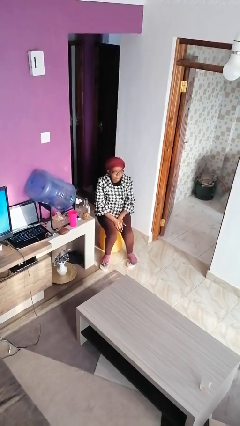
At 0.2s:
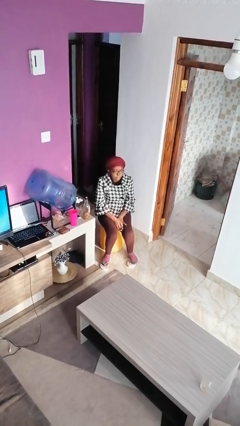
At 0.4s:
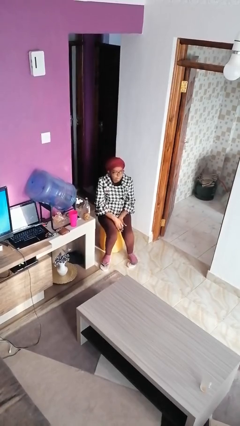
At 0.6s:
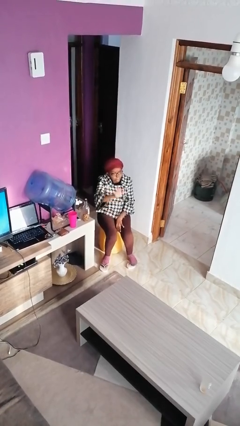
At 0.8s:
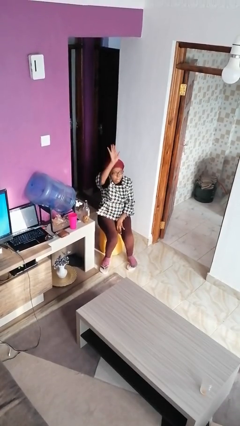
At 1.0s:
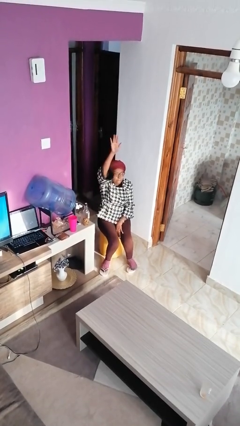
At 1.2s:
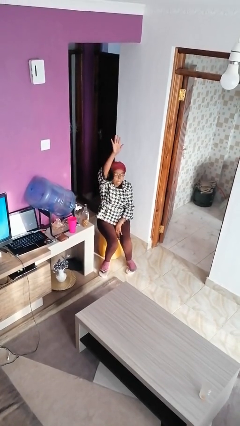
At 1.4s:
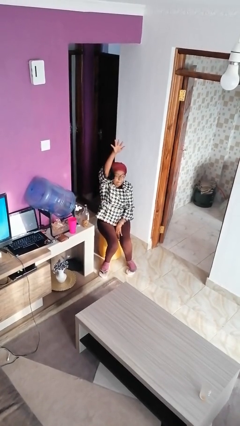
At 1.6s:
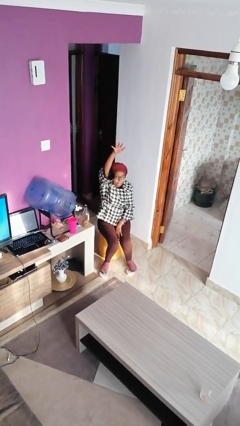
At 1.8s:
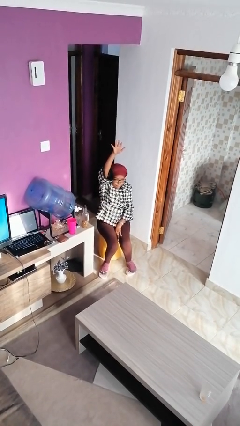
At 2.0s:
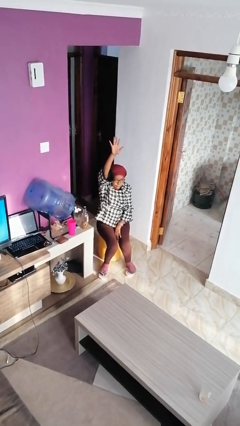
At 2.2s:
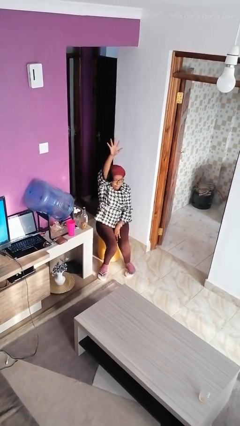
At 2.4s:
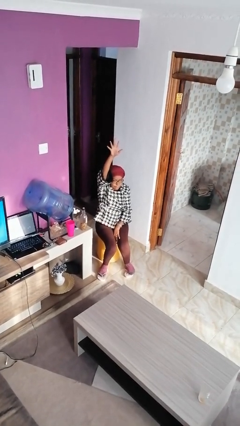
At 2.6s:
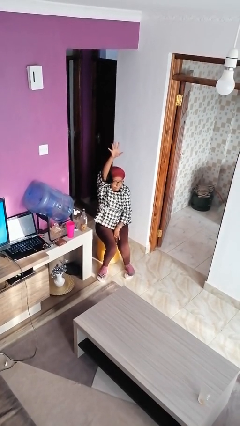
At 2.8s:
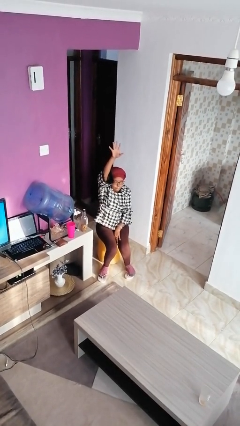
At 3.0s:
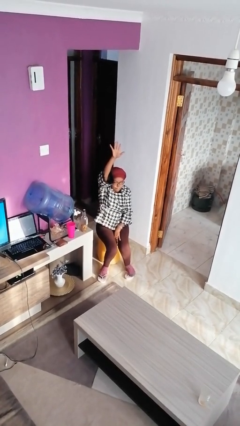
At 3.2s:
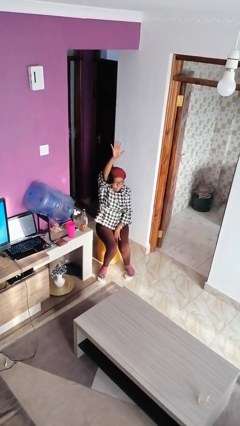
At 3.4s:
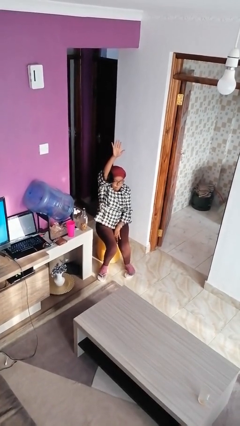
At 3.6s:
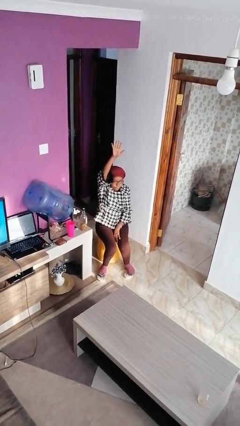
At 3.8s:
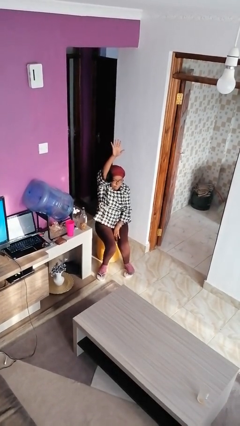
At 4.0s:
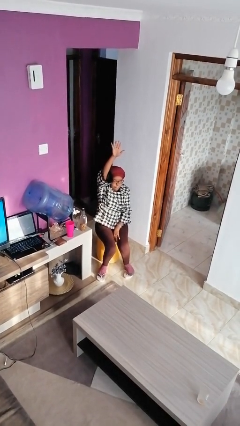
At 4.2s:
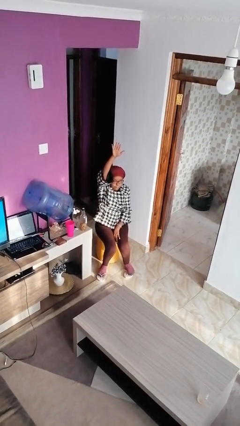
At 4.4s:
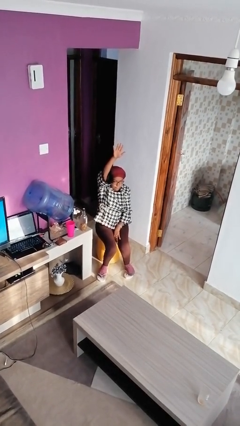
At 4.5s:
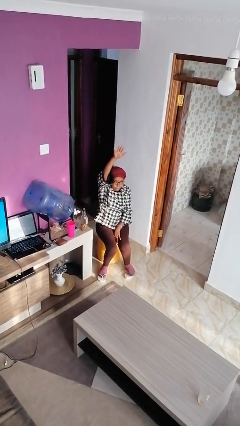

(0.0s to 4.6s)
person gestures raise hand

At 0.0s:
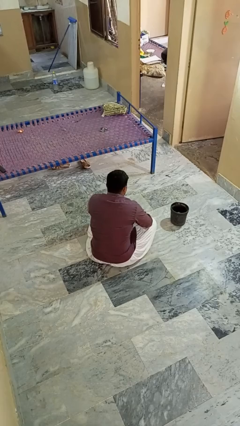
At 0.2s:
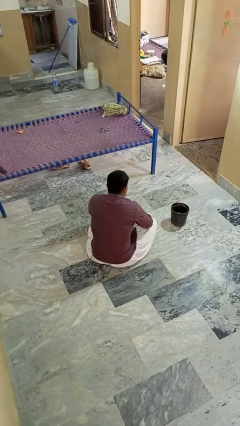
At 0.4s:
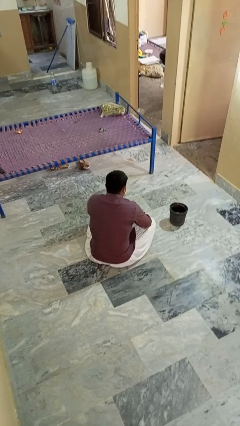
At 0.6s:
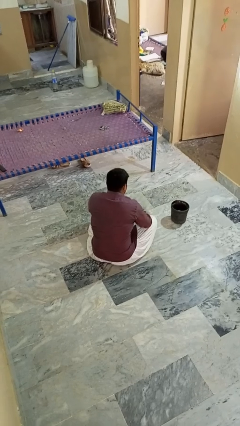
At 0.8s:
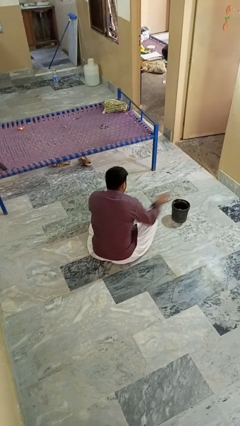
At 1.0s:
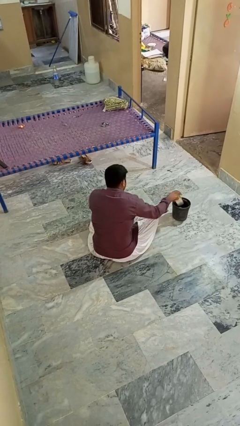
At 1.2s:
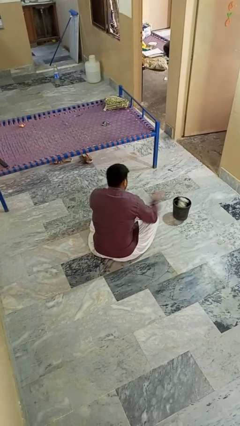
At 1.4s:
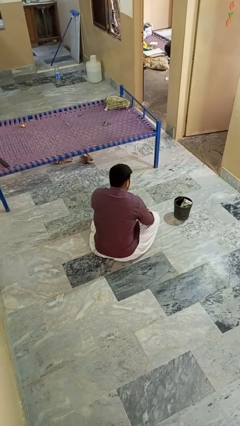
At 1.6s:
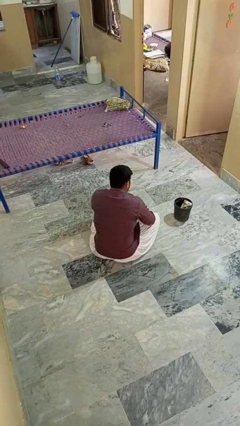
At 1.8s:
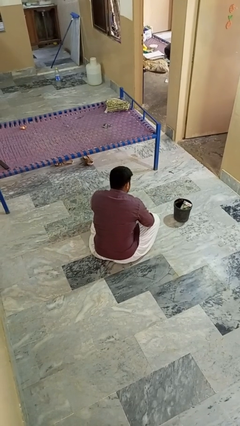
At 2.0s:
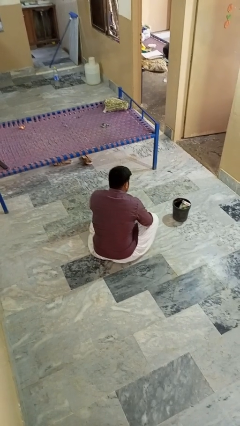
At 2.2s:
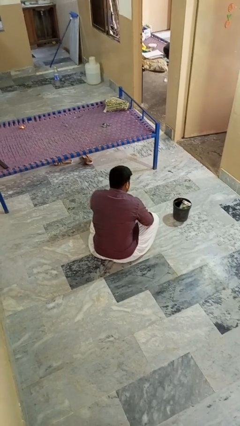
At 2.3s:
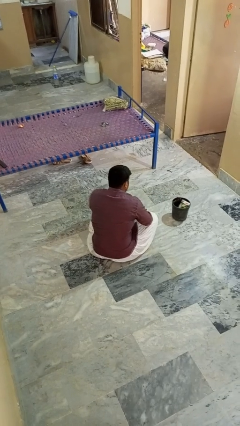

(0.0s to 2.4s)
person puts object into basket

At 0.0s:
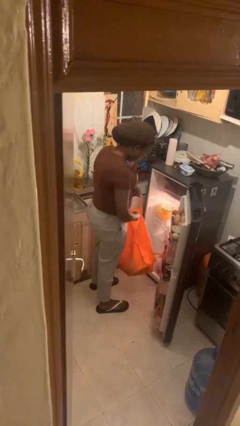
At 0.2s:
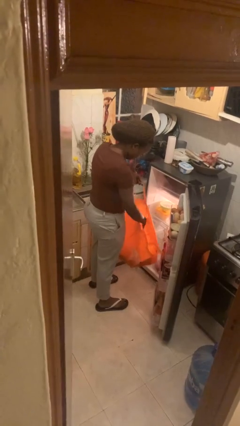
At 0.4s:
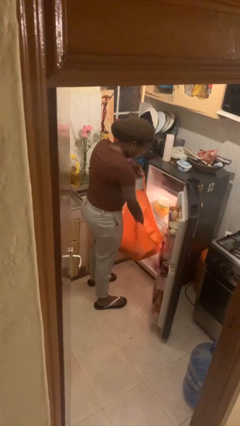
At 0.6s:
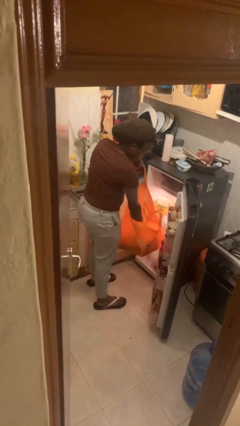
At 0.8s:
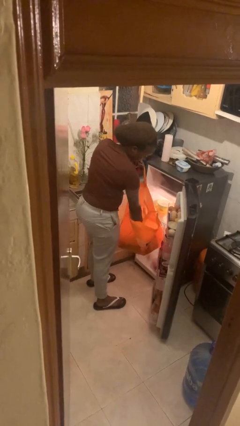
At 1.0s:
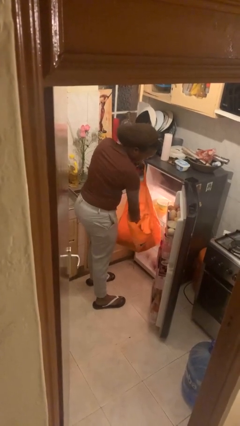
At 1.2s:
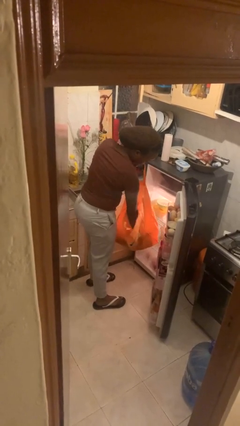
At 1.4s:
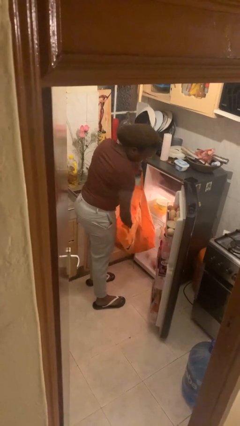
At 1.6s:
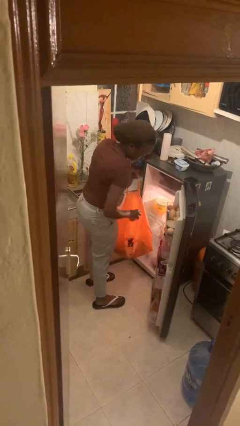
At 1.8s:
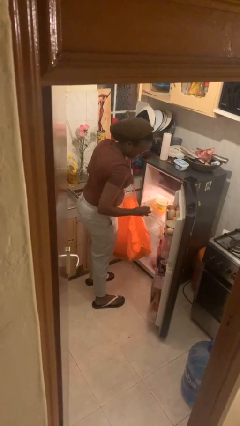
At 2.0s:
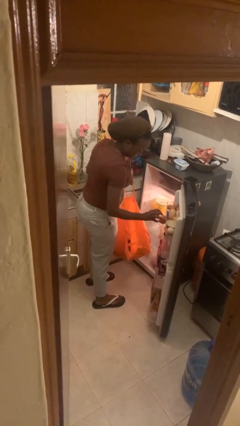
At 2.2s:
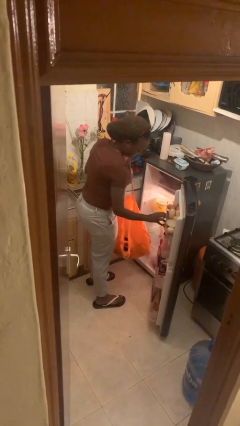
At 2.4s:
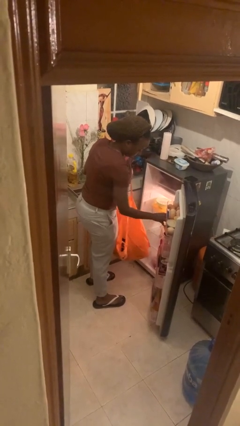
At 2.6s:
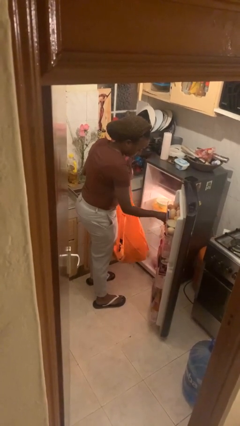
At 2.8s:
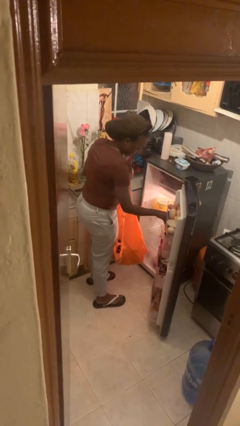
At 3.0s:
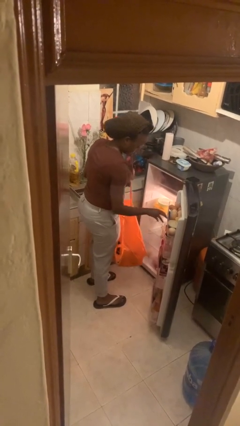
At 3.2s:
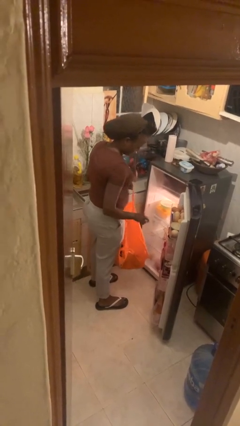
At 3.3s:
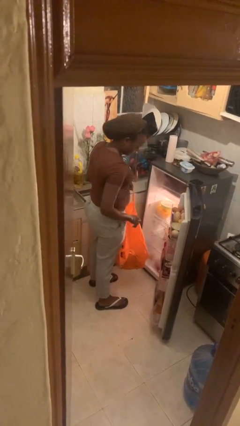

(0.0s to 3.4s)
person loads groceries into refrigerator

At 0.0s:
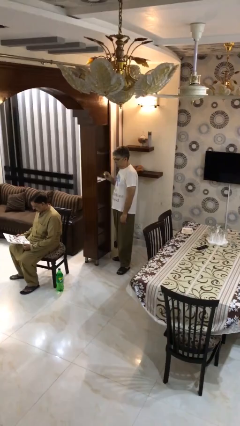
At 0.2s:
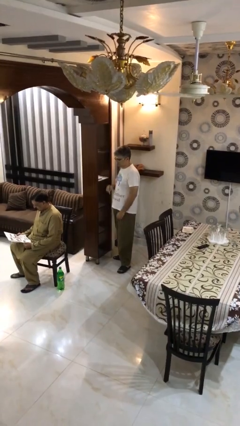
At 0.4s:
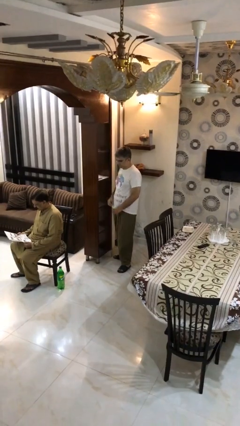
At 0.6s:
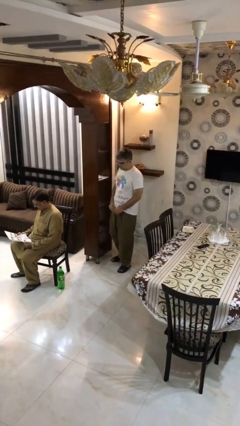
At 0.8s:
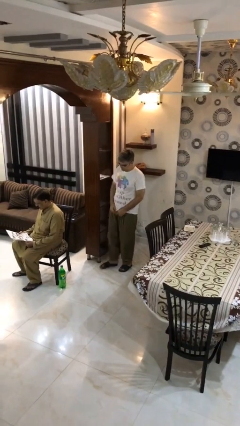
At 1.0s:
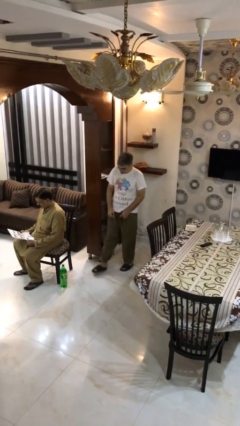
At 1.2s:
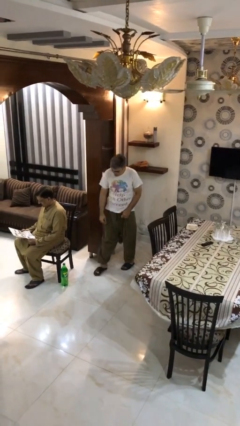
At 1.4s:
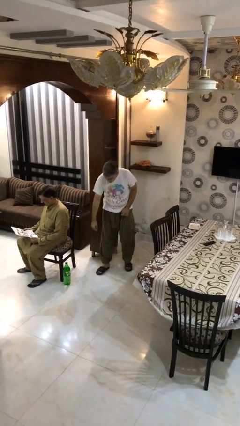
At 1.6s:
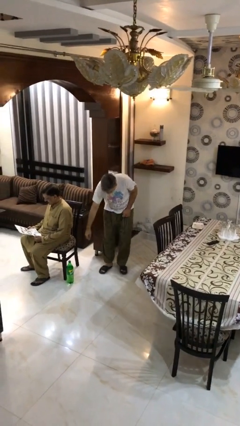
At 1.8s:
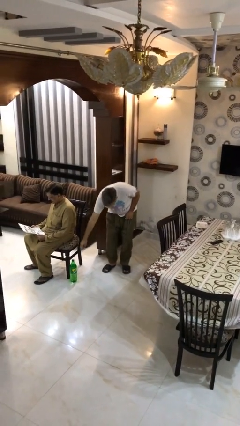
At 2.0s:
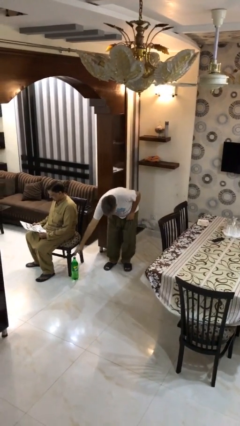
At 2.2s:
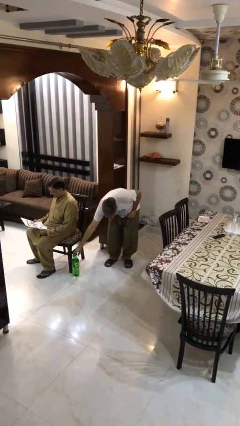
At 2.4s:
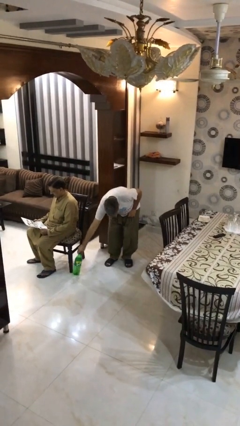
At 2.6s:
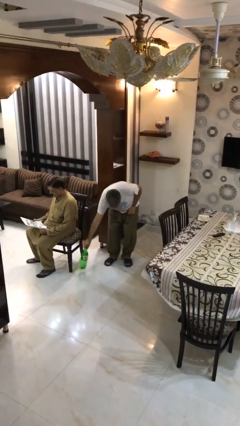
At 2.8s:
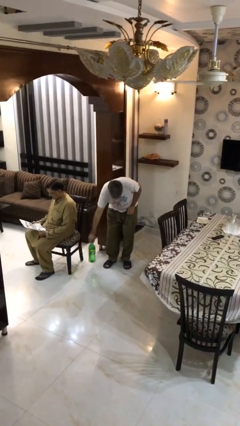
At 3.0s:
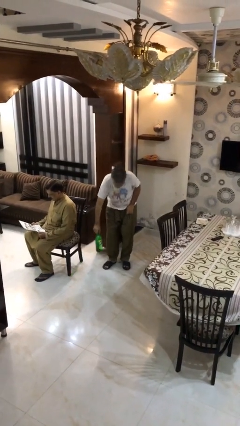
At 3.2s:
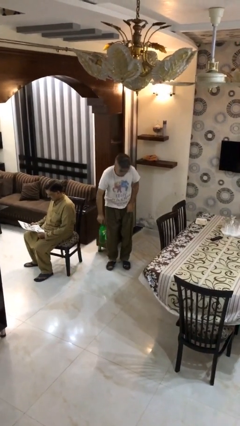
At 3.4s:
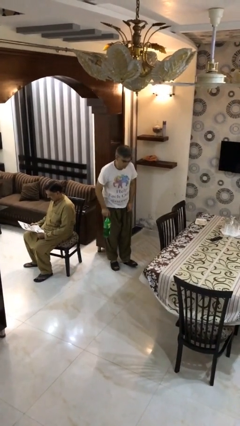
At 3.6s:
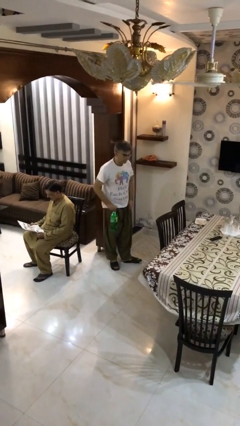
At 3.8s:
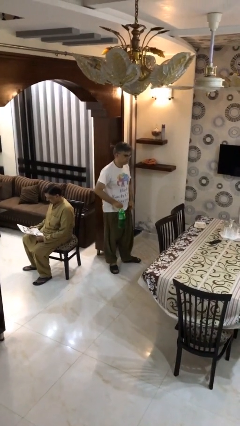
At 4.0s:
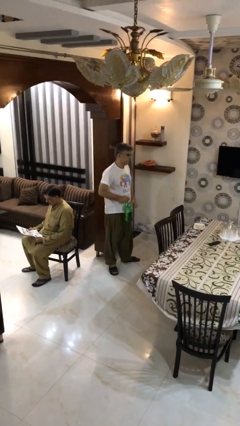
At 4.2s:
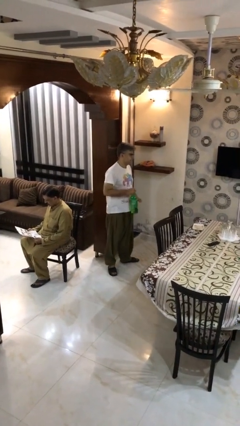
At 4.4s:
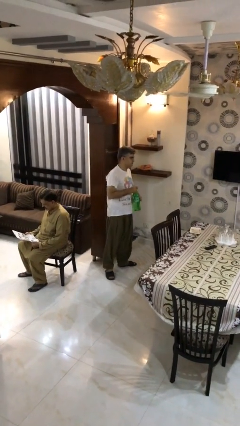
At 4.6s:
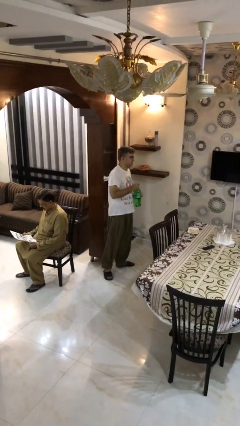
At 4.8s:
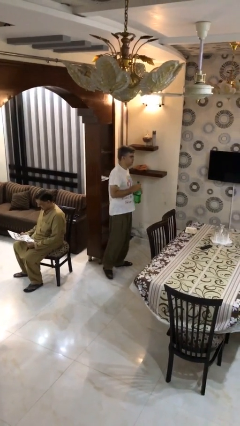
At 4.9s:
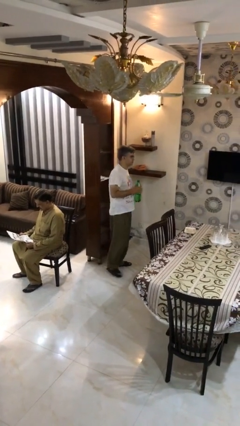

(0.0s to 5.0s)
person steals object from person

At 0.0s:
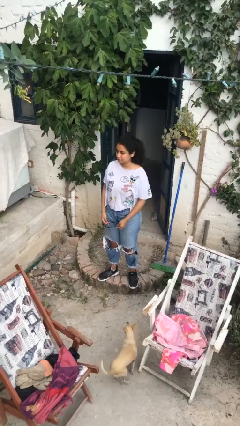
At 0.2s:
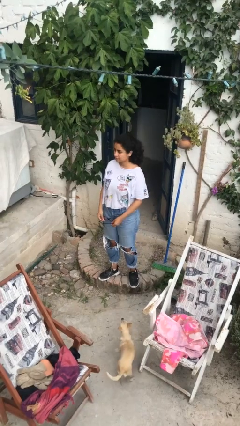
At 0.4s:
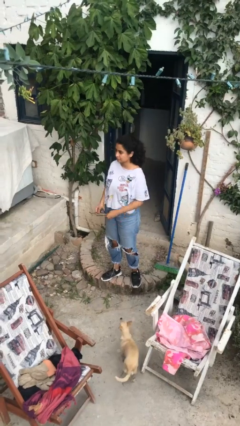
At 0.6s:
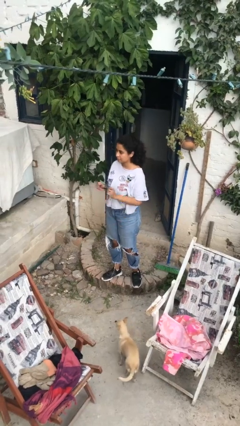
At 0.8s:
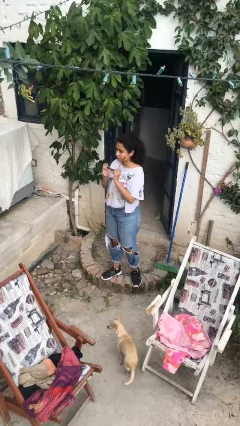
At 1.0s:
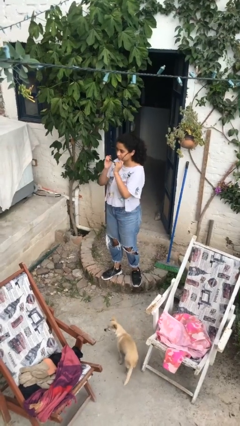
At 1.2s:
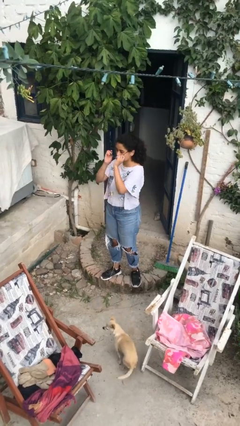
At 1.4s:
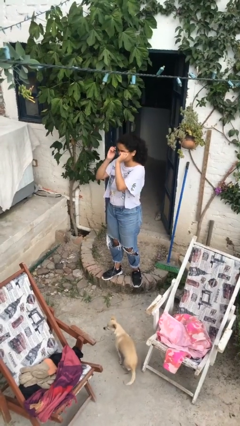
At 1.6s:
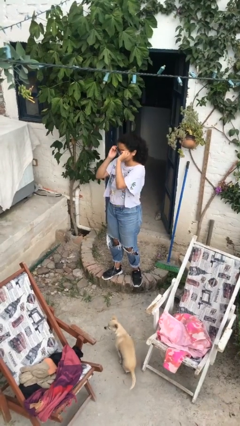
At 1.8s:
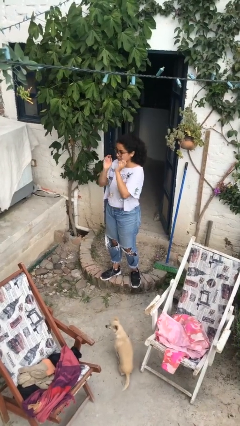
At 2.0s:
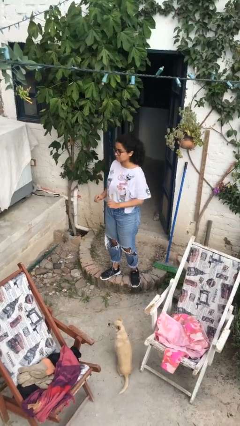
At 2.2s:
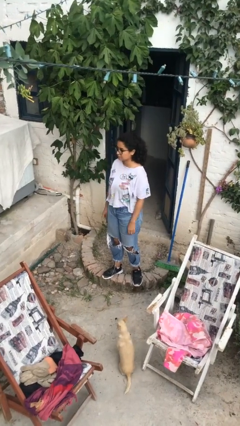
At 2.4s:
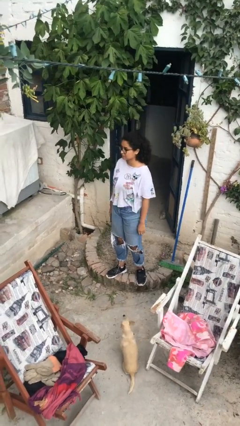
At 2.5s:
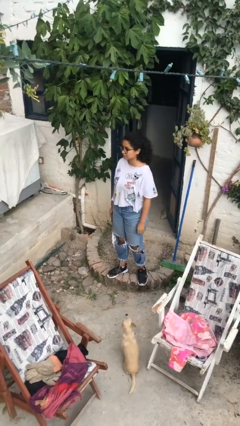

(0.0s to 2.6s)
person puts on glasses
